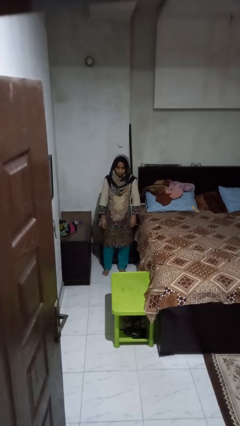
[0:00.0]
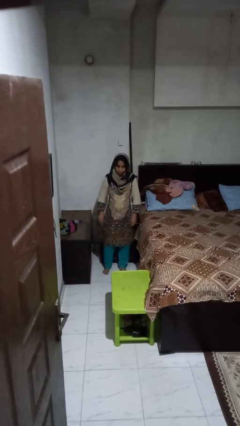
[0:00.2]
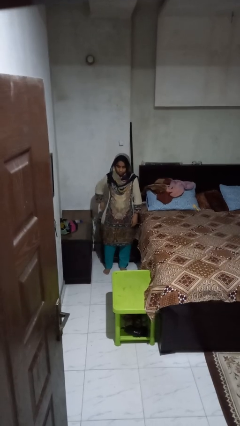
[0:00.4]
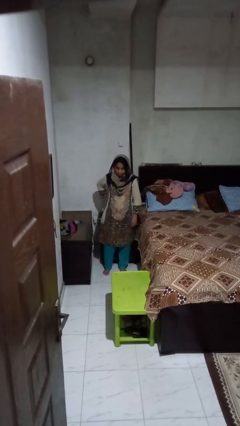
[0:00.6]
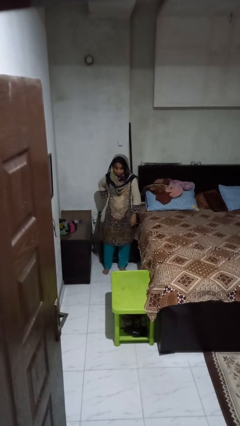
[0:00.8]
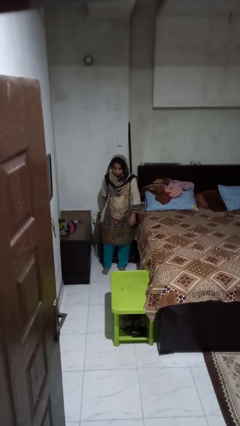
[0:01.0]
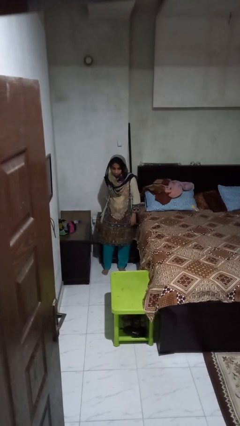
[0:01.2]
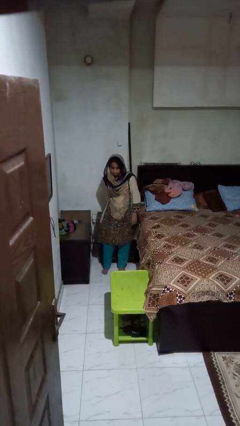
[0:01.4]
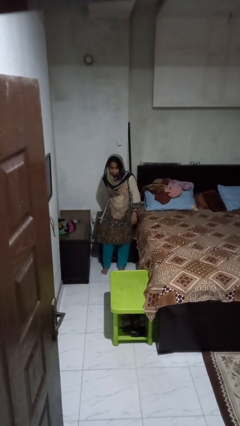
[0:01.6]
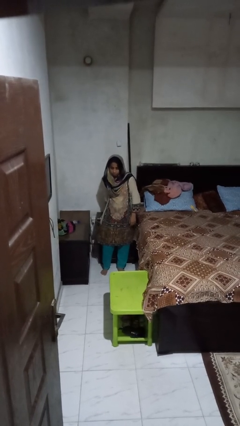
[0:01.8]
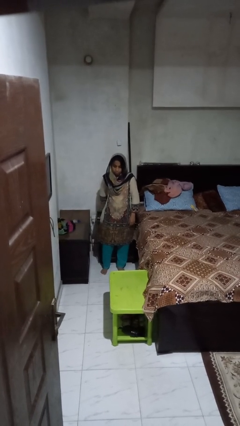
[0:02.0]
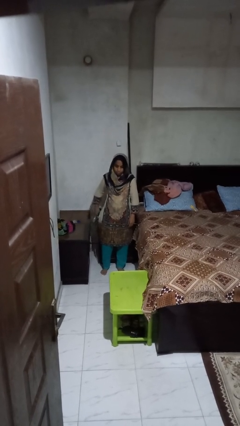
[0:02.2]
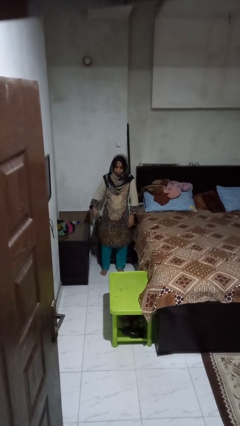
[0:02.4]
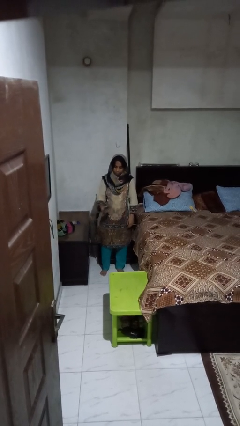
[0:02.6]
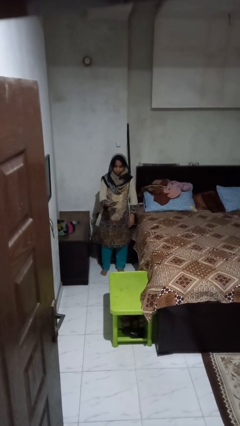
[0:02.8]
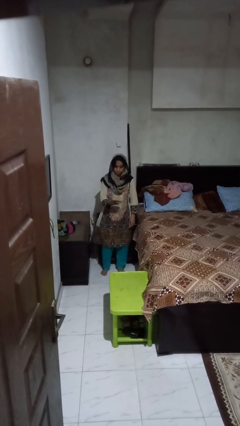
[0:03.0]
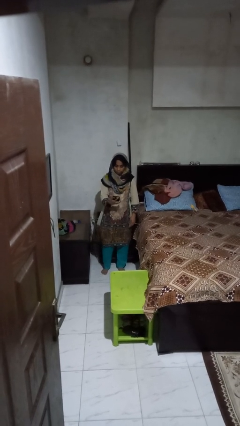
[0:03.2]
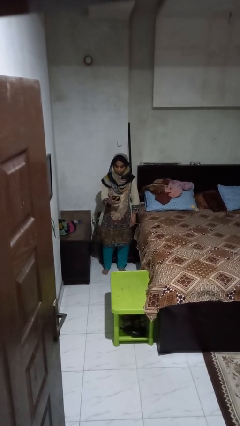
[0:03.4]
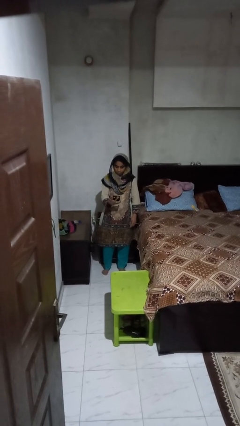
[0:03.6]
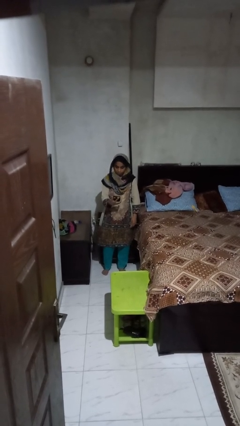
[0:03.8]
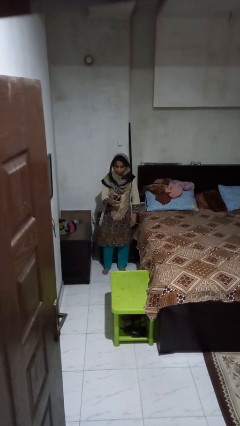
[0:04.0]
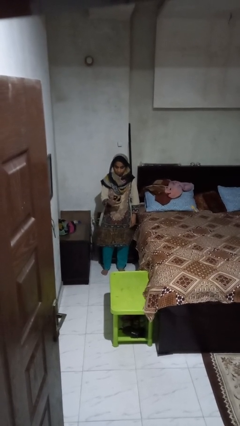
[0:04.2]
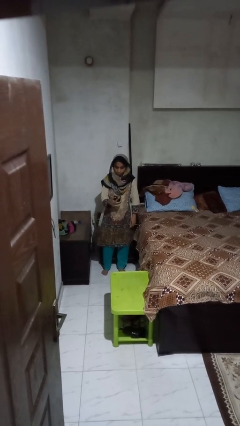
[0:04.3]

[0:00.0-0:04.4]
person takes phone from pocket

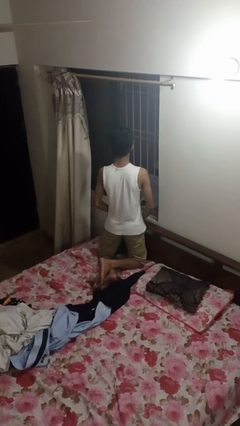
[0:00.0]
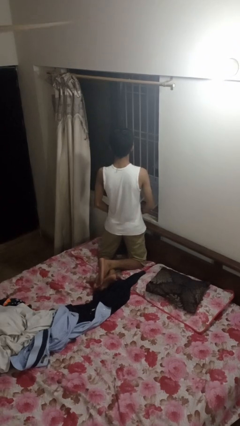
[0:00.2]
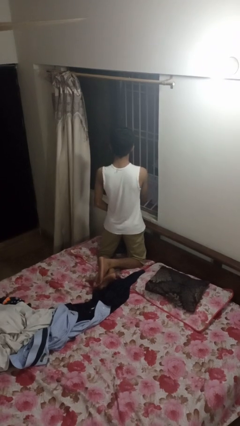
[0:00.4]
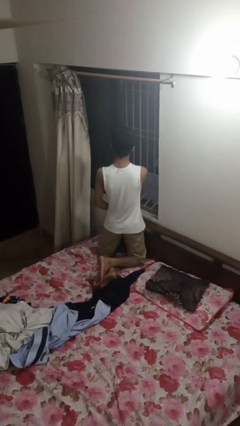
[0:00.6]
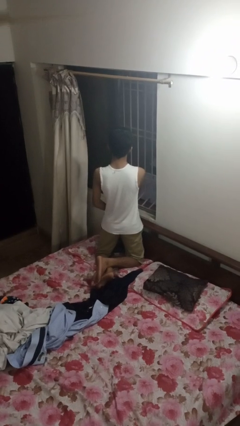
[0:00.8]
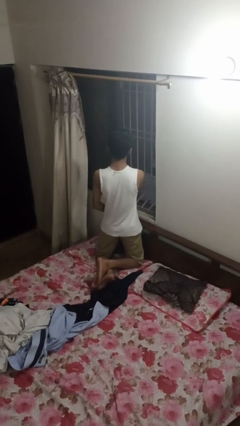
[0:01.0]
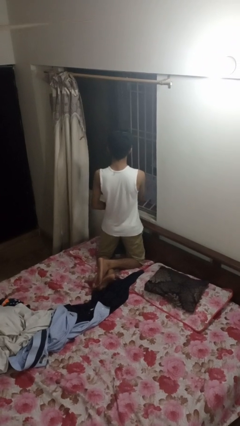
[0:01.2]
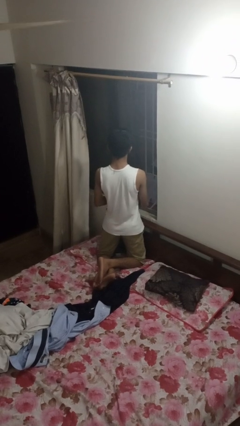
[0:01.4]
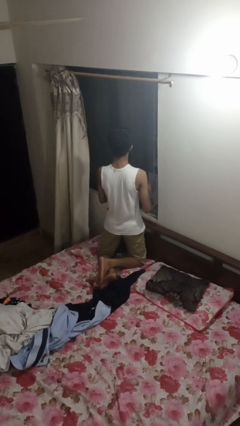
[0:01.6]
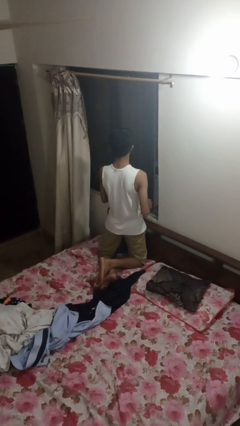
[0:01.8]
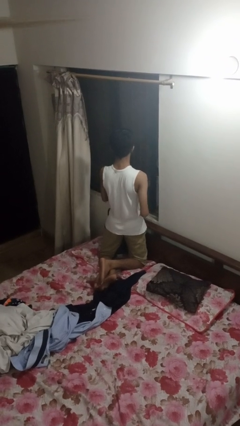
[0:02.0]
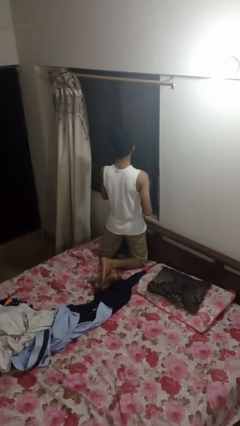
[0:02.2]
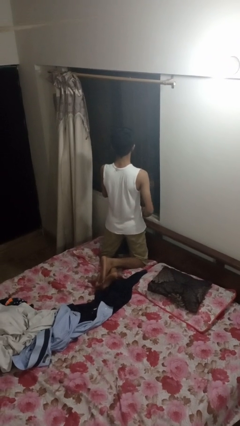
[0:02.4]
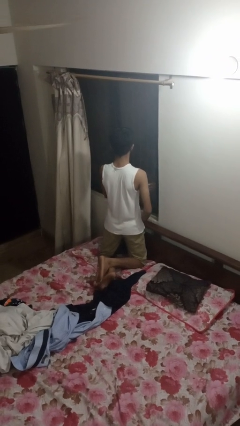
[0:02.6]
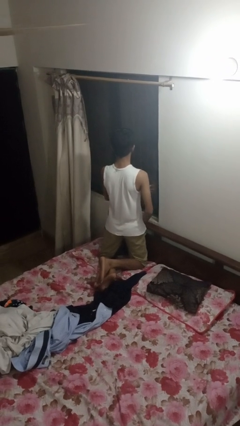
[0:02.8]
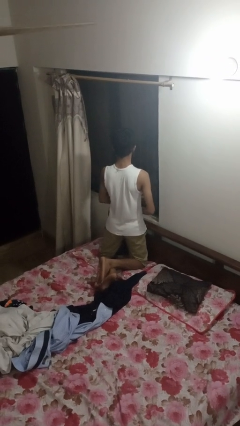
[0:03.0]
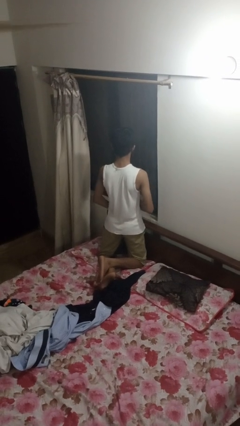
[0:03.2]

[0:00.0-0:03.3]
person closes home window

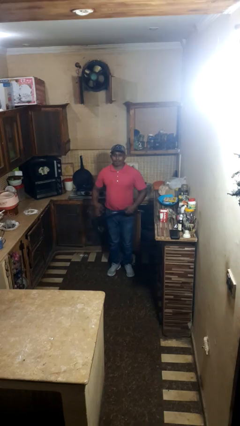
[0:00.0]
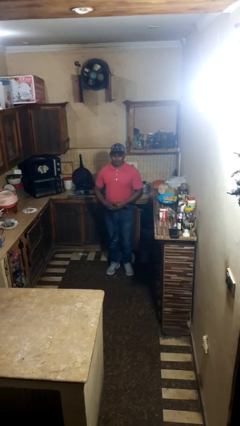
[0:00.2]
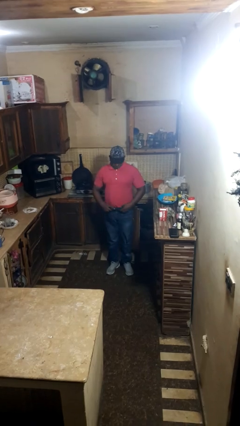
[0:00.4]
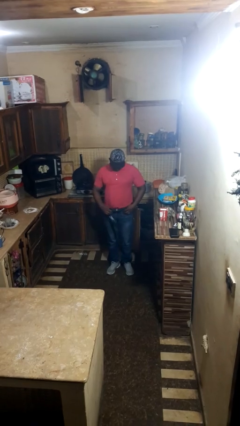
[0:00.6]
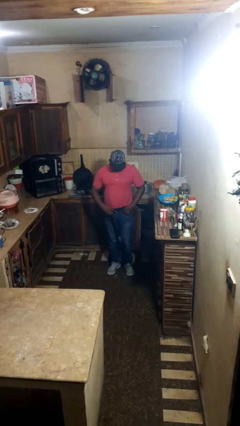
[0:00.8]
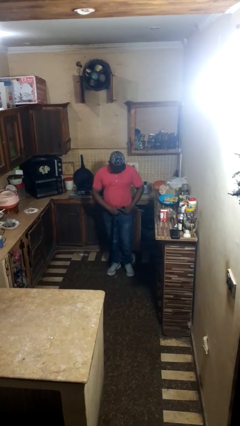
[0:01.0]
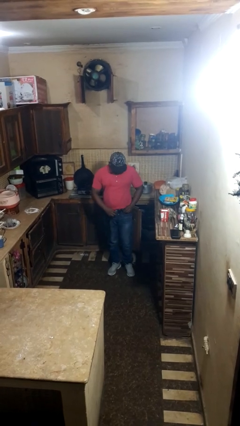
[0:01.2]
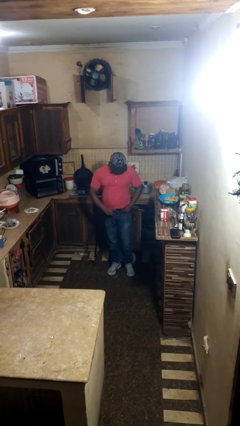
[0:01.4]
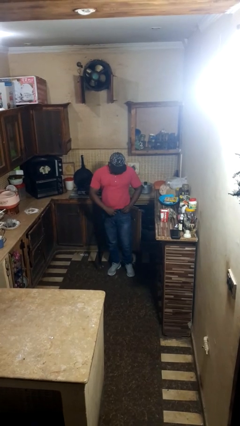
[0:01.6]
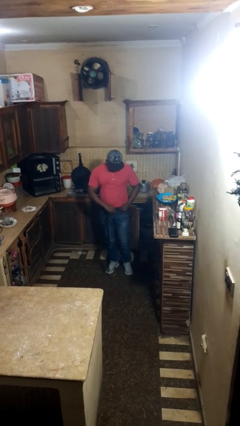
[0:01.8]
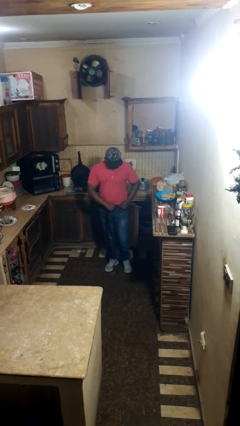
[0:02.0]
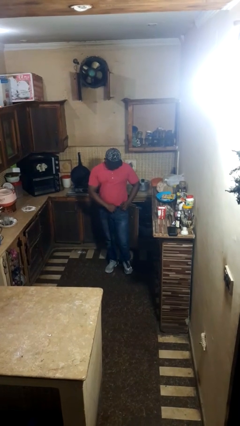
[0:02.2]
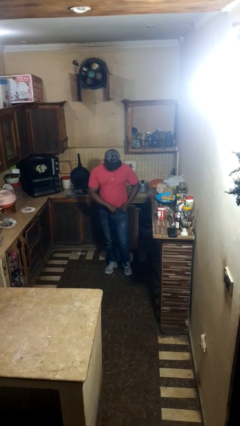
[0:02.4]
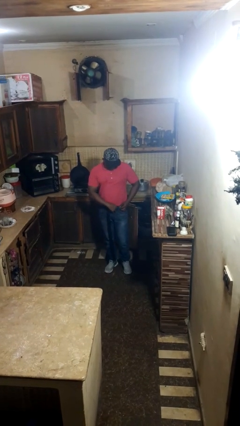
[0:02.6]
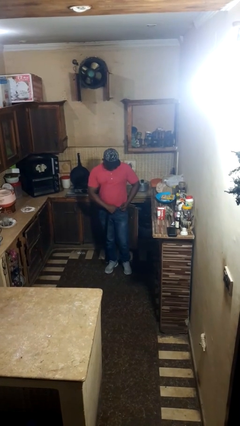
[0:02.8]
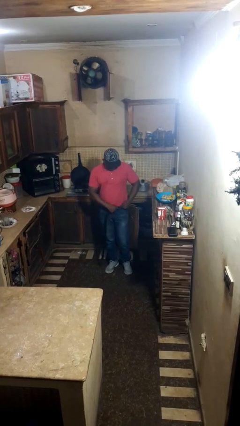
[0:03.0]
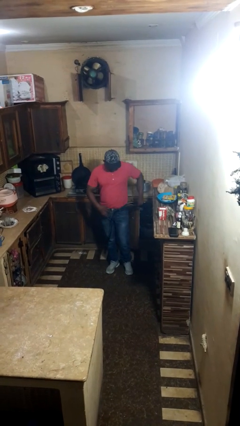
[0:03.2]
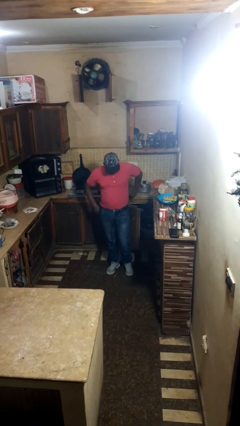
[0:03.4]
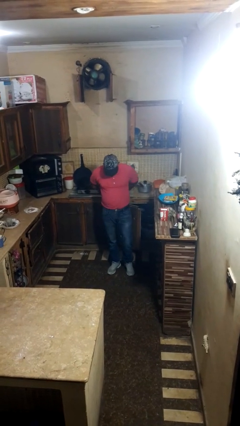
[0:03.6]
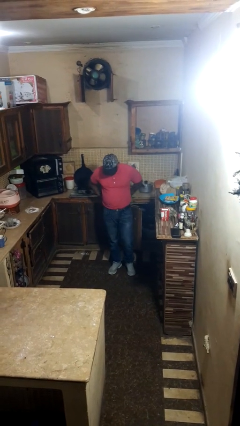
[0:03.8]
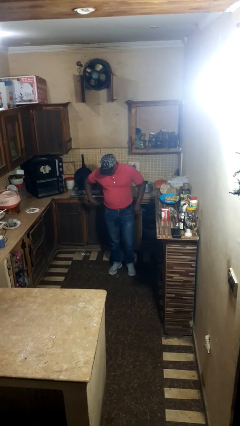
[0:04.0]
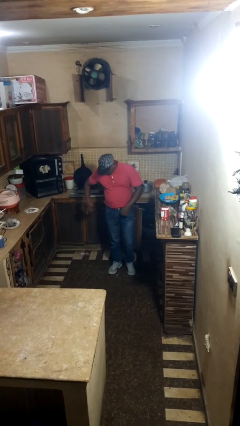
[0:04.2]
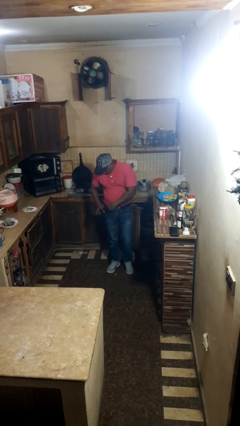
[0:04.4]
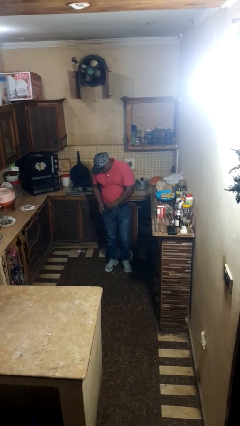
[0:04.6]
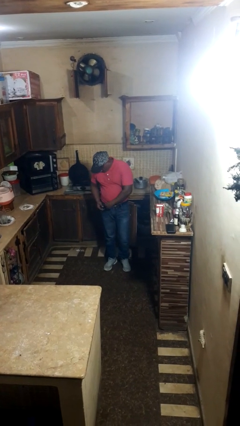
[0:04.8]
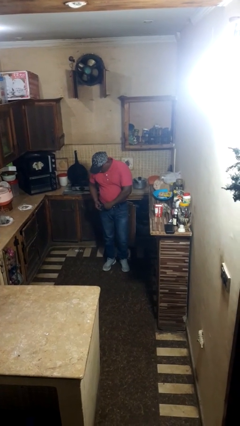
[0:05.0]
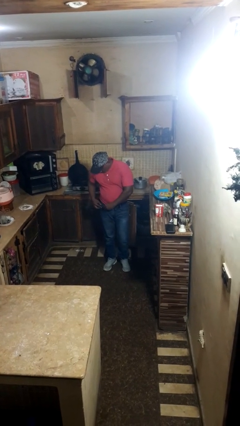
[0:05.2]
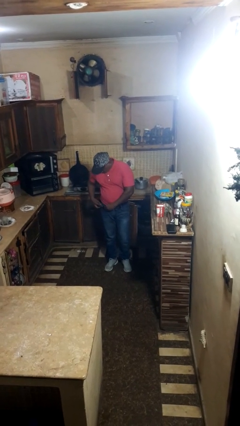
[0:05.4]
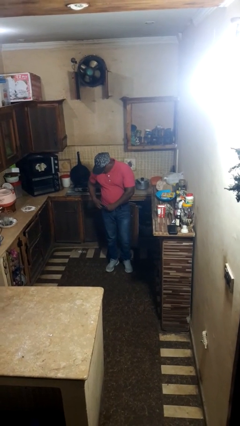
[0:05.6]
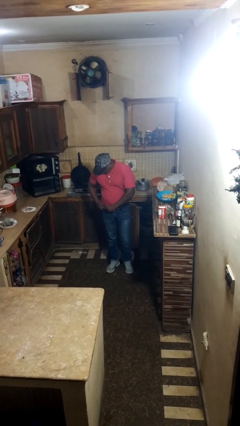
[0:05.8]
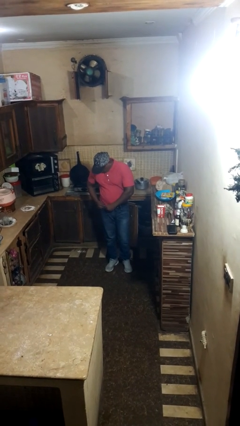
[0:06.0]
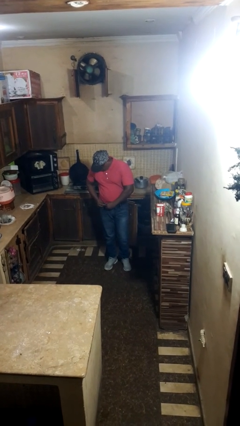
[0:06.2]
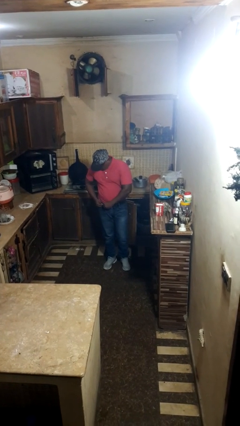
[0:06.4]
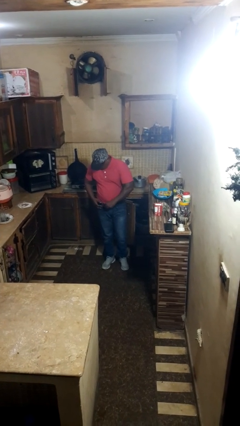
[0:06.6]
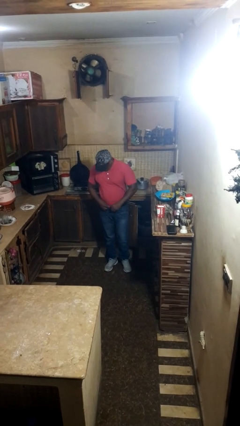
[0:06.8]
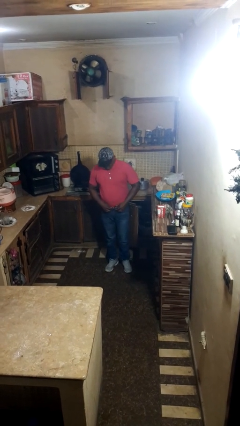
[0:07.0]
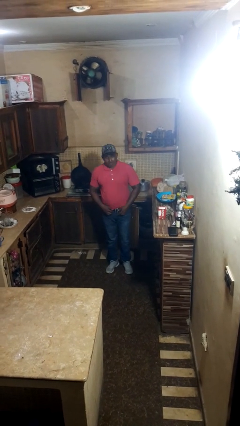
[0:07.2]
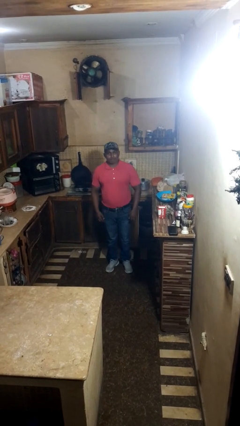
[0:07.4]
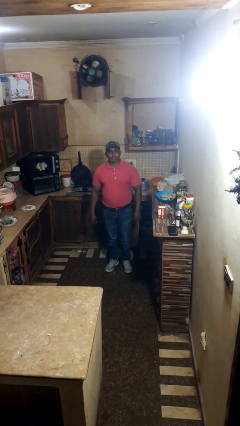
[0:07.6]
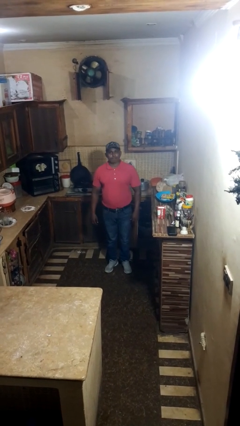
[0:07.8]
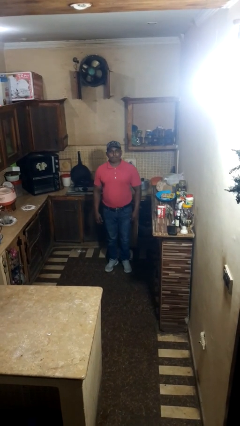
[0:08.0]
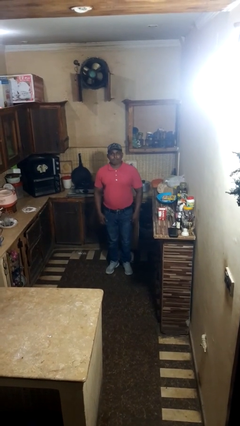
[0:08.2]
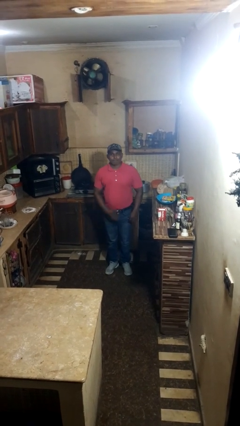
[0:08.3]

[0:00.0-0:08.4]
person puts on belt

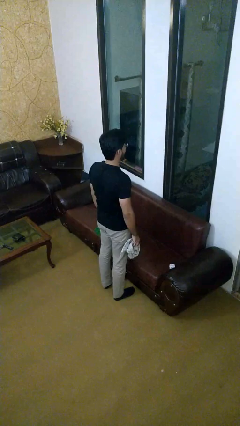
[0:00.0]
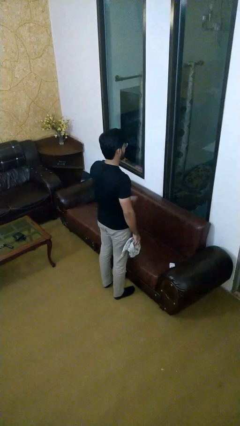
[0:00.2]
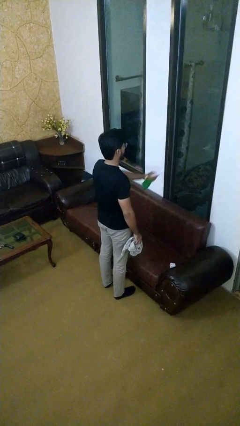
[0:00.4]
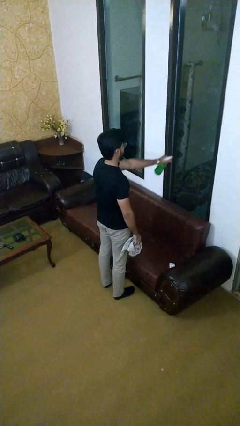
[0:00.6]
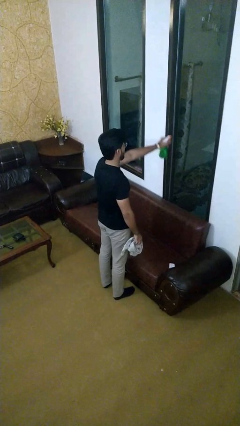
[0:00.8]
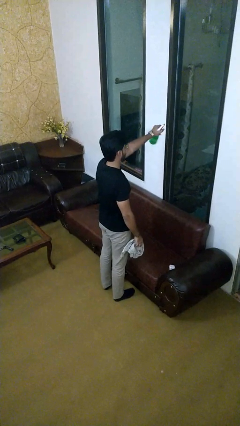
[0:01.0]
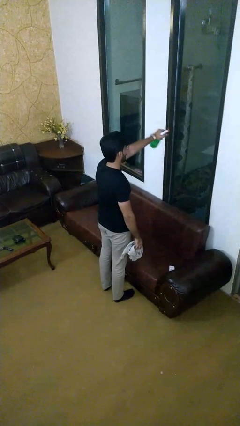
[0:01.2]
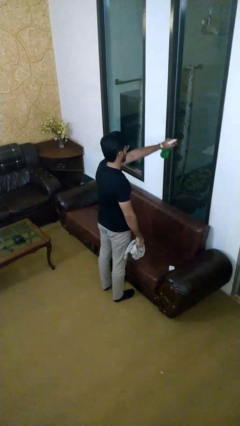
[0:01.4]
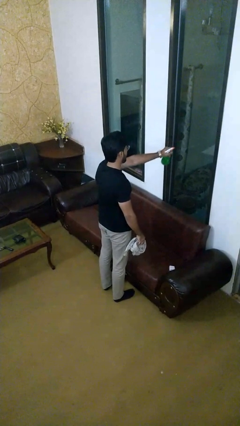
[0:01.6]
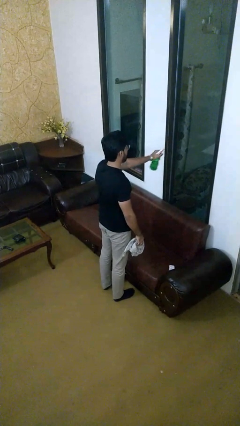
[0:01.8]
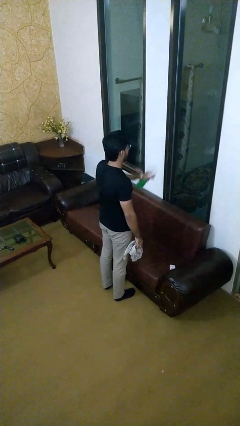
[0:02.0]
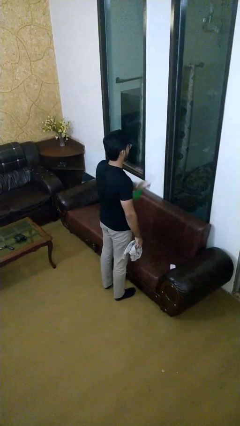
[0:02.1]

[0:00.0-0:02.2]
person sprays from bottle
